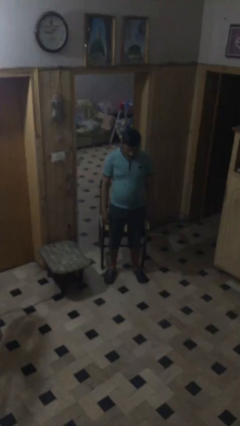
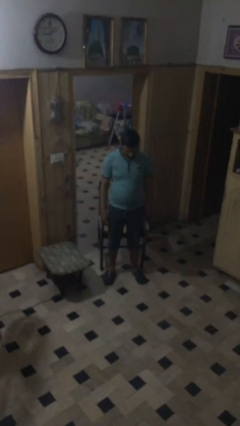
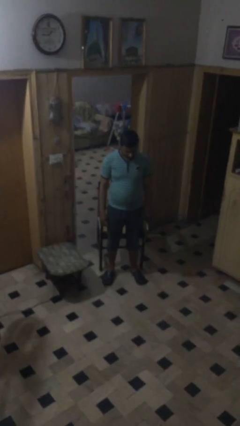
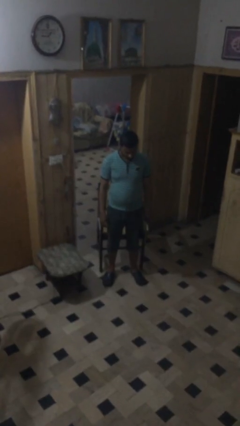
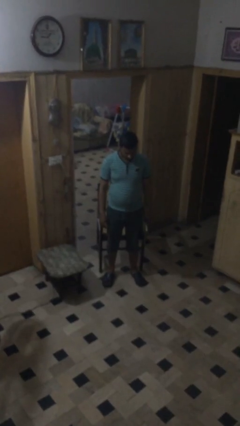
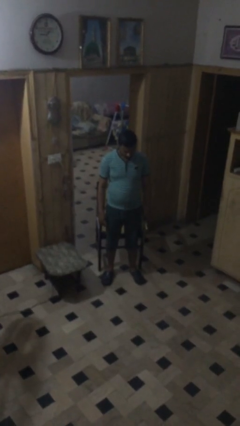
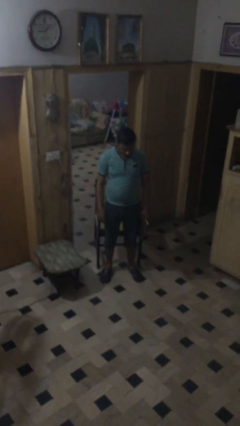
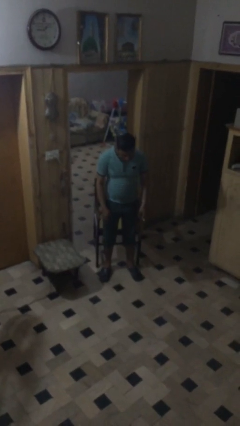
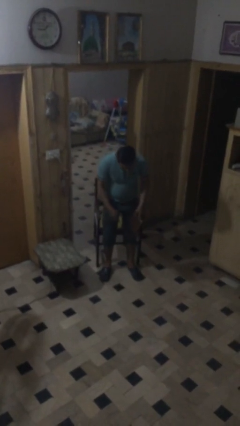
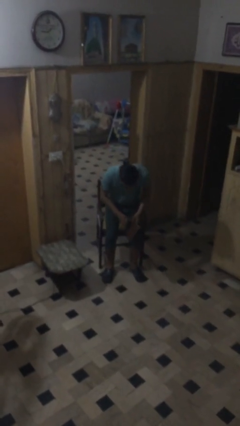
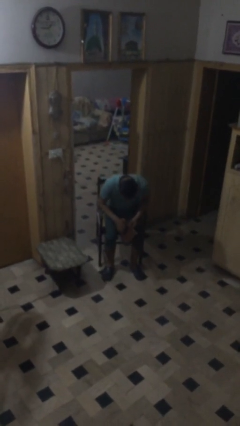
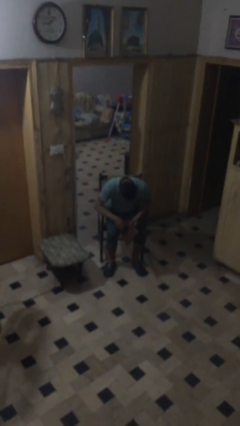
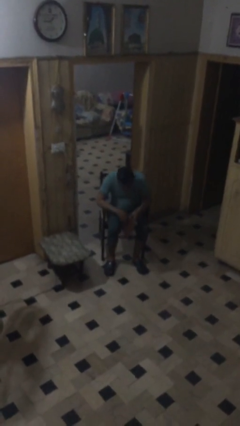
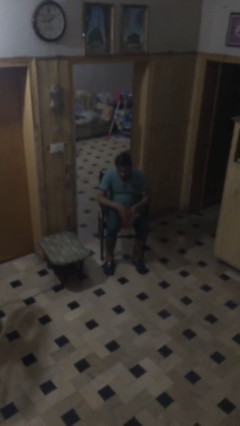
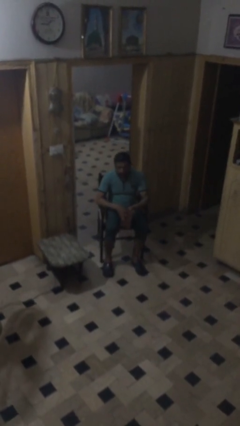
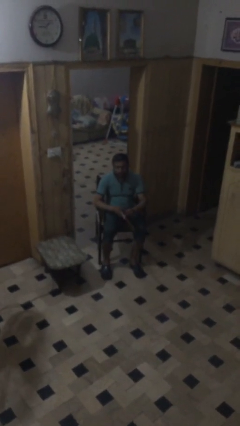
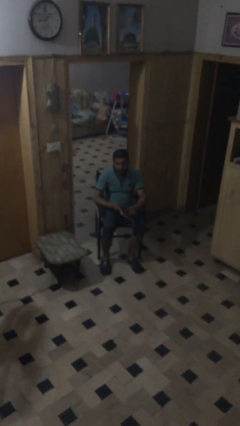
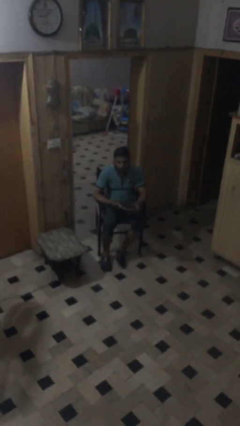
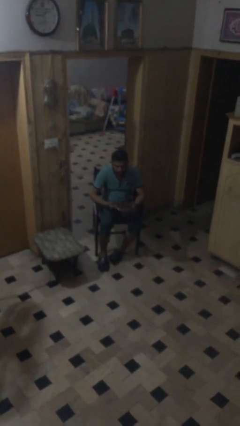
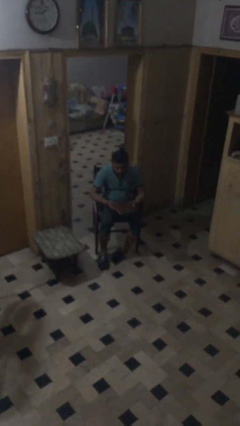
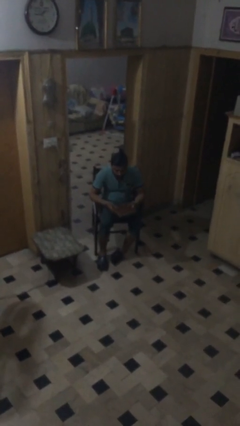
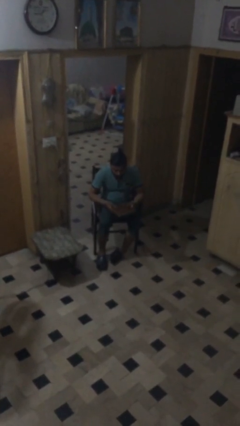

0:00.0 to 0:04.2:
person sits down

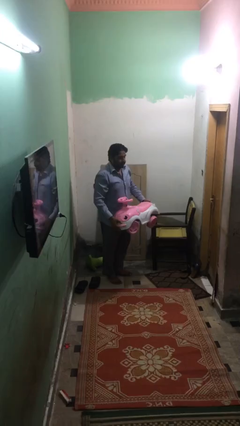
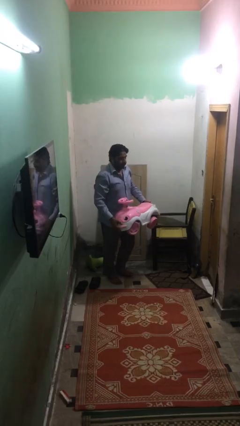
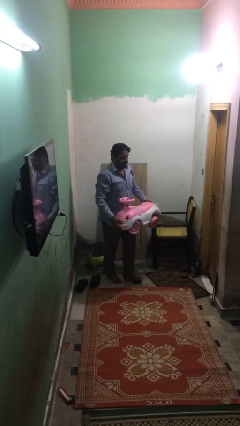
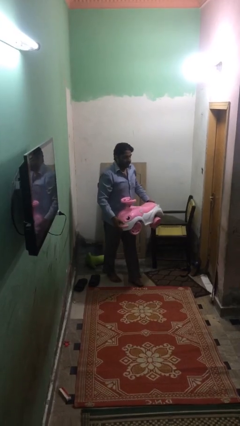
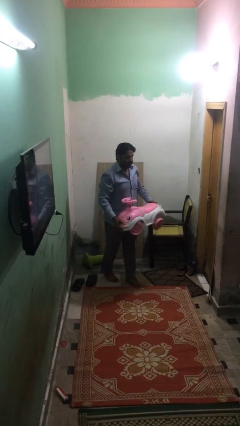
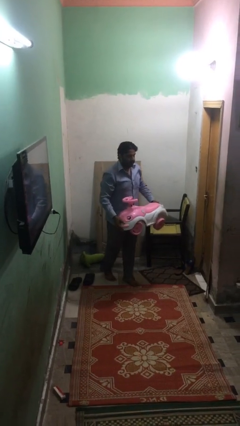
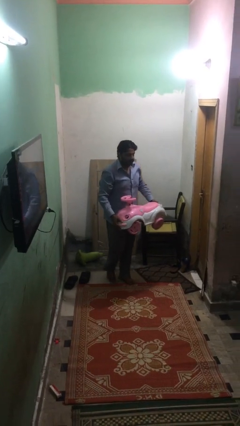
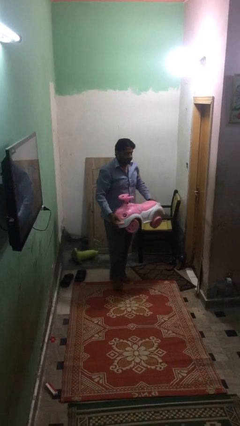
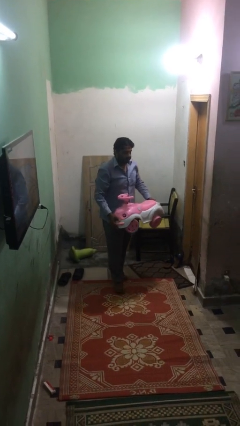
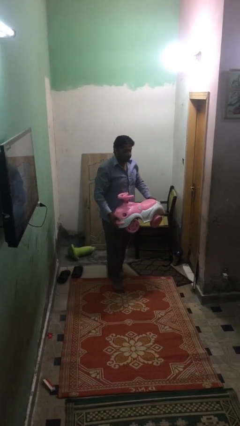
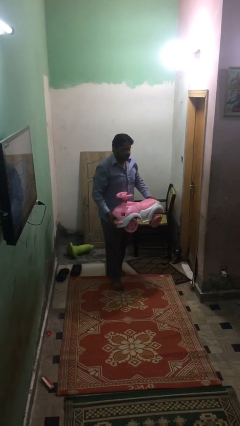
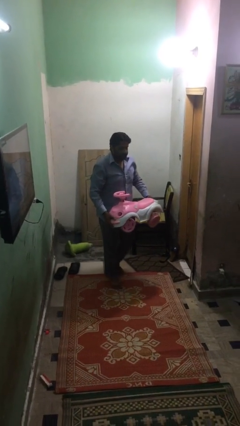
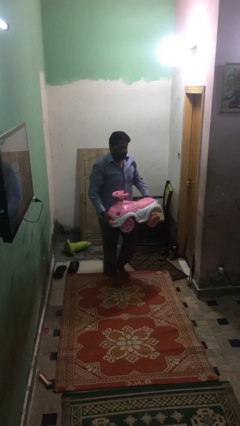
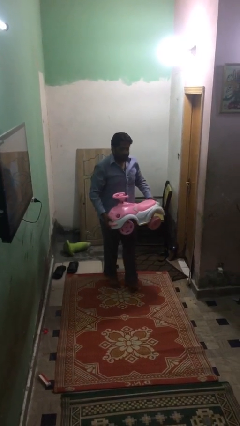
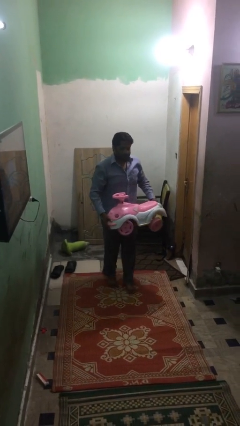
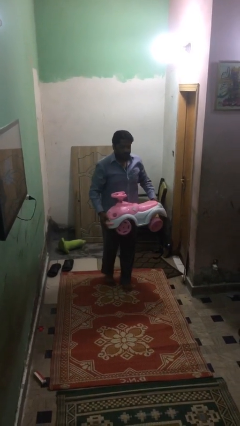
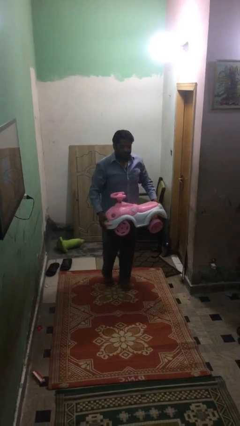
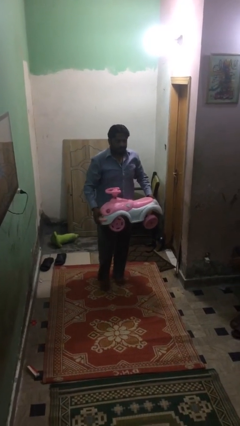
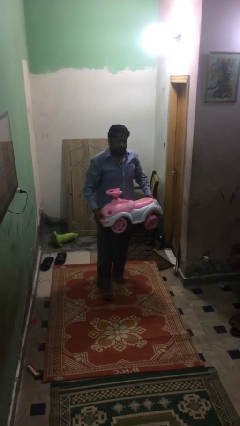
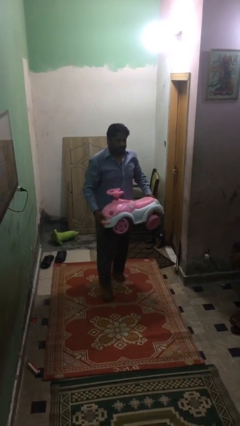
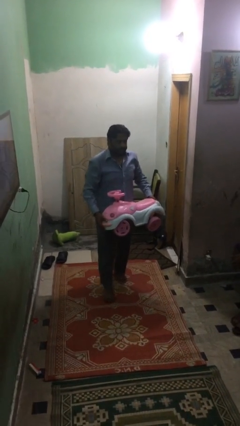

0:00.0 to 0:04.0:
person carries heavy object

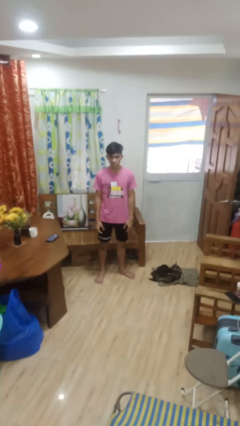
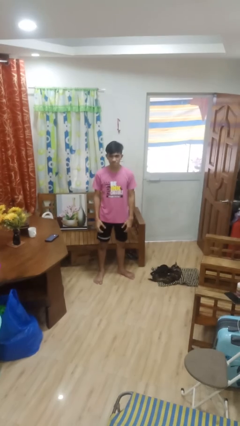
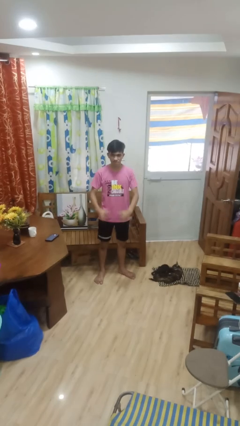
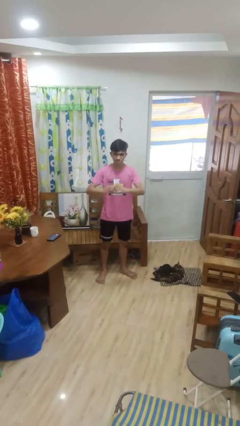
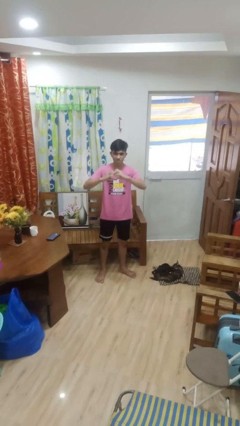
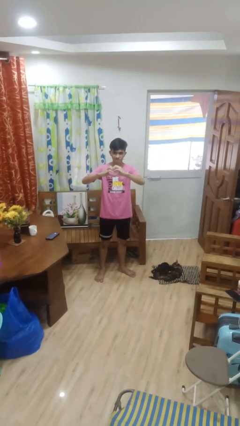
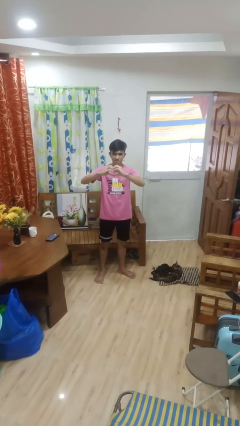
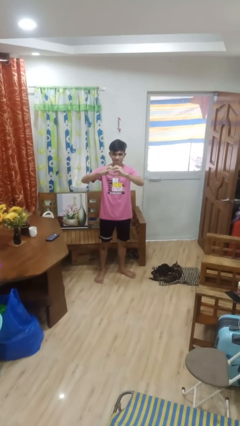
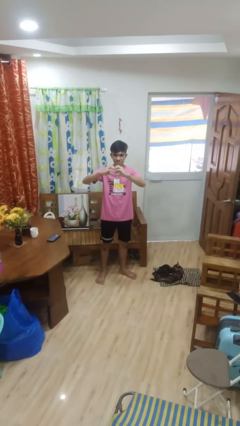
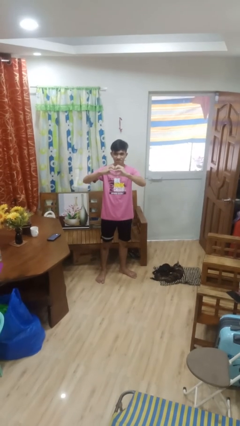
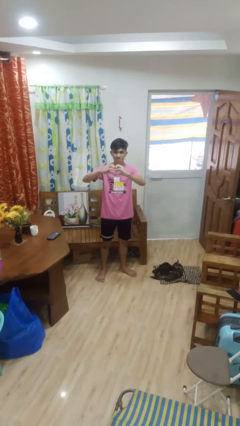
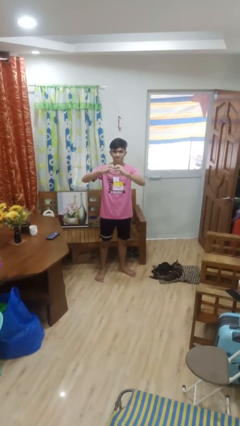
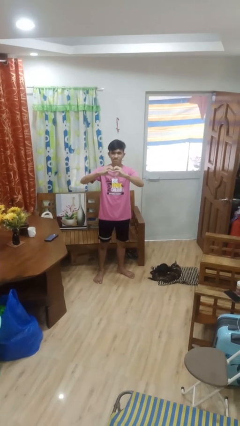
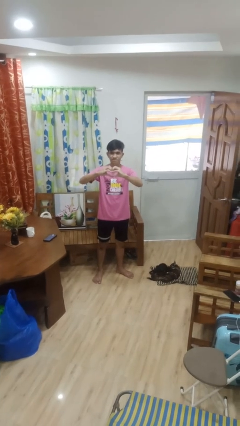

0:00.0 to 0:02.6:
person gestures heart

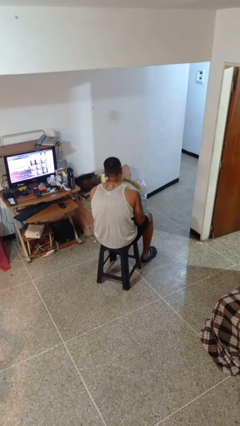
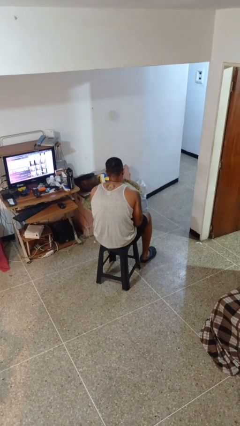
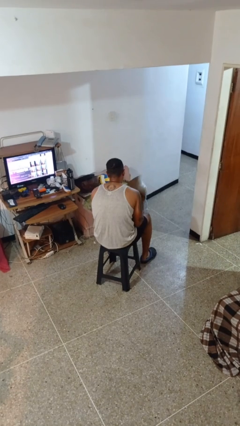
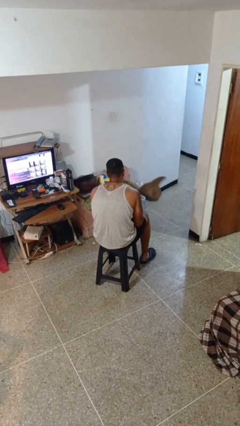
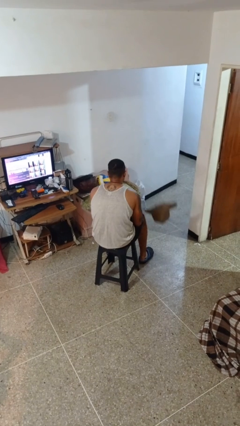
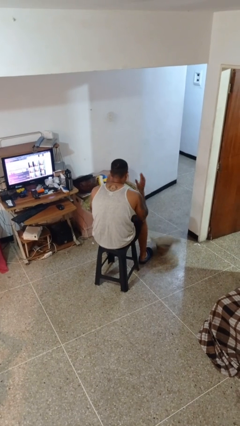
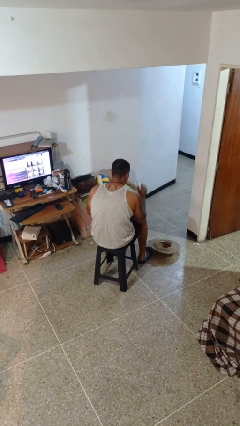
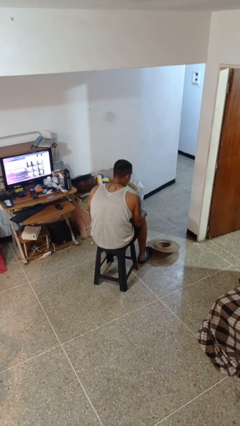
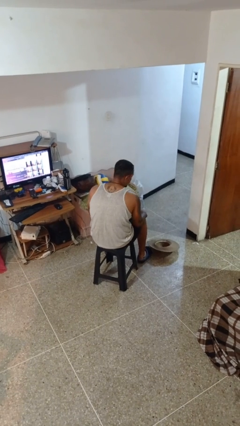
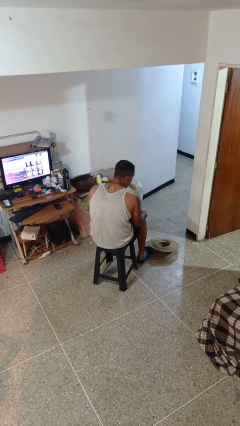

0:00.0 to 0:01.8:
person drops object

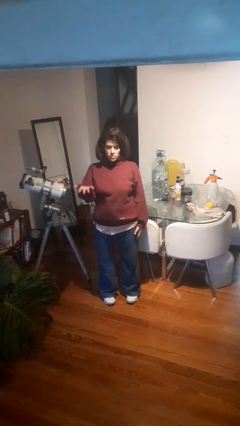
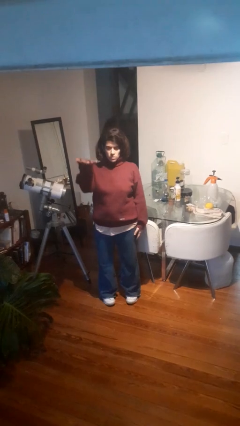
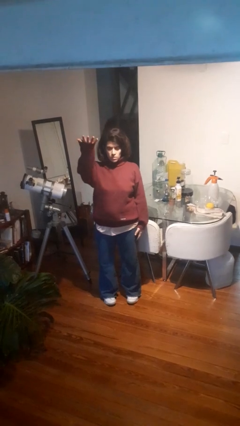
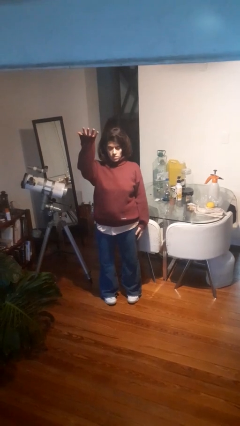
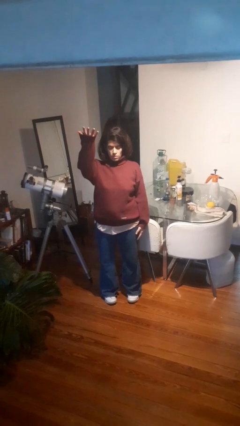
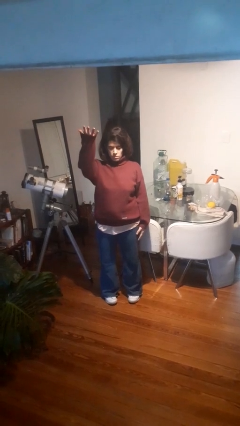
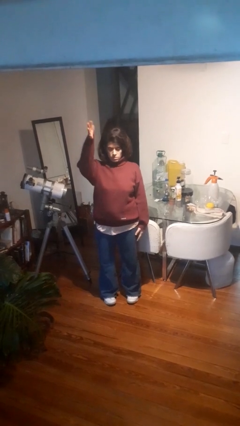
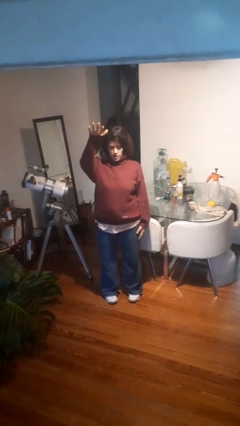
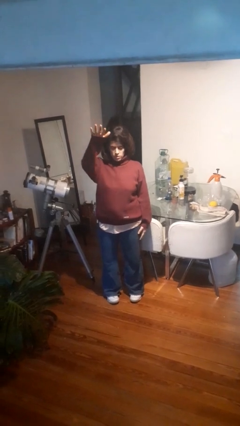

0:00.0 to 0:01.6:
person gestures swipe up

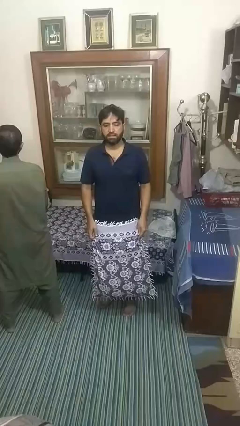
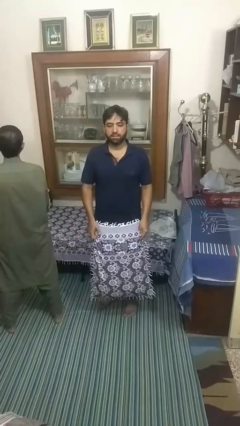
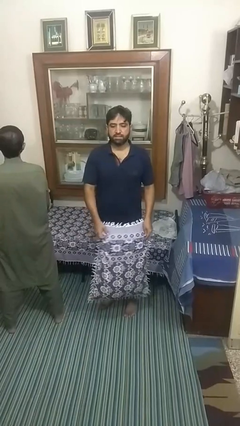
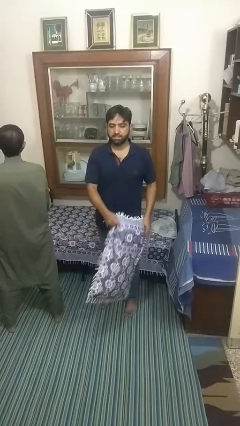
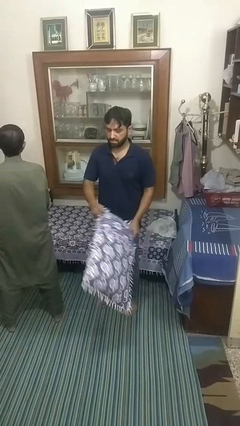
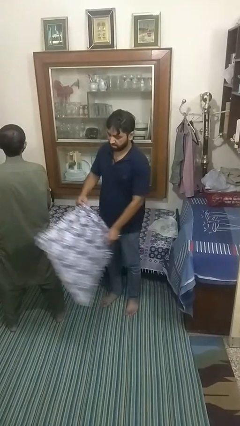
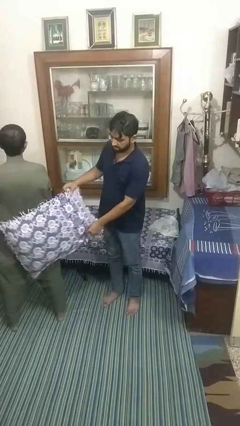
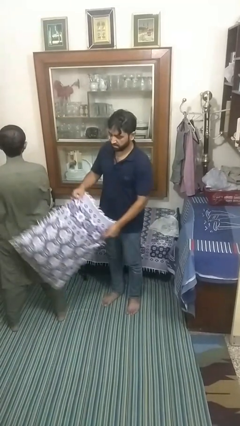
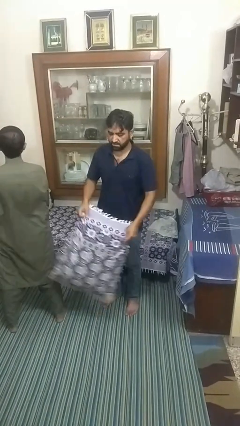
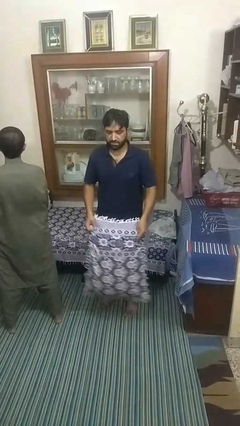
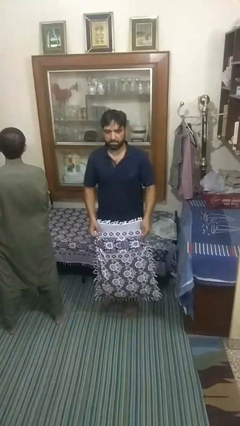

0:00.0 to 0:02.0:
person hits person with pillow

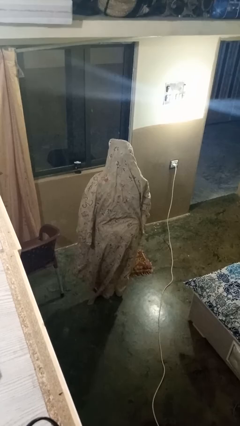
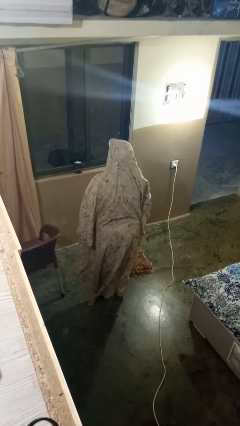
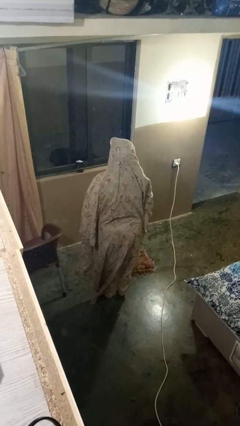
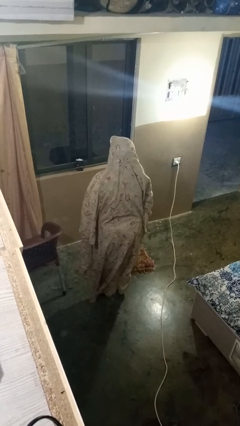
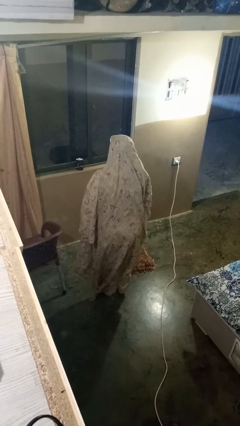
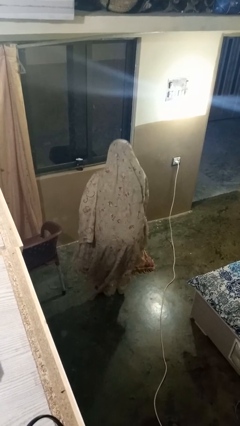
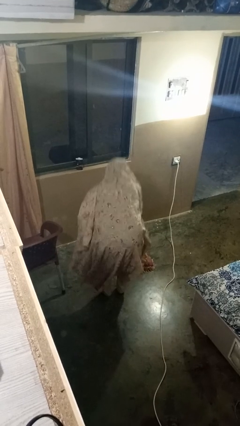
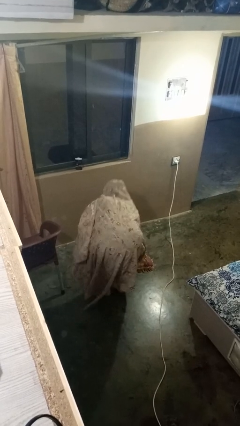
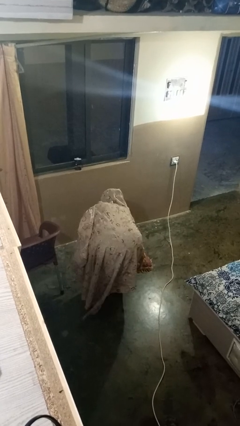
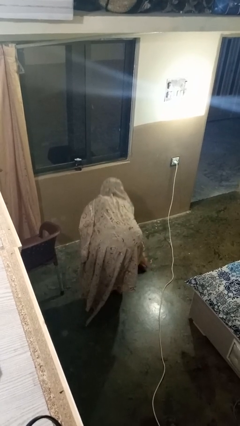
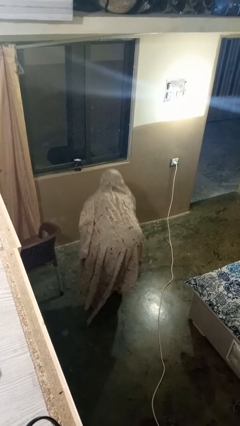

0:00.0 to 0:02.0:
person picks up object from floor
